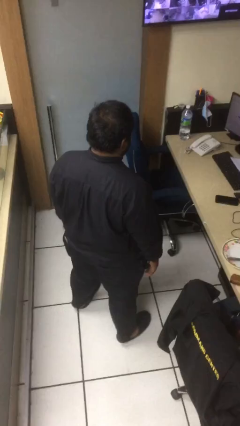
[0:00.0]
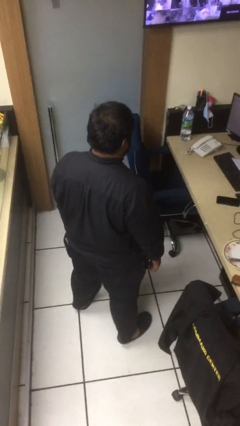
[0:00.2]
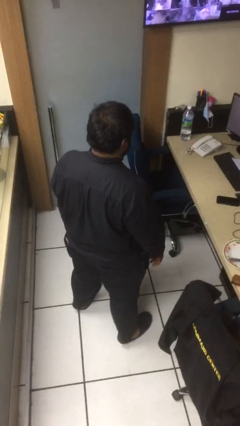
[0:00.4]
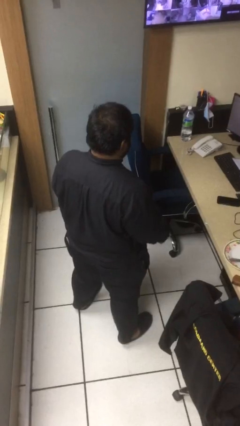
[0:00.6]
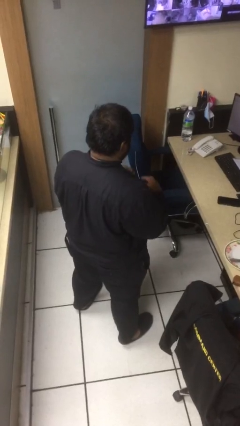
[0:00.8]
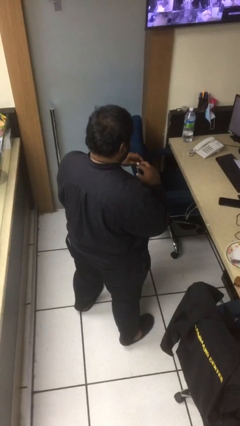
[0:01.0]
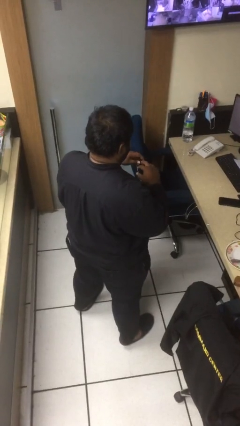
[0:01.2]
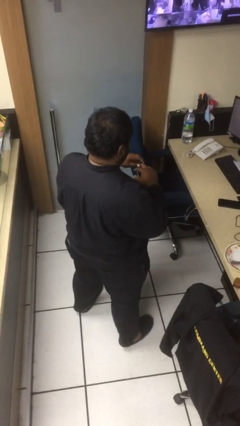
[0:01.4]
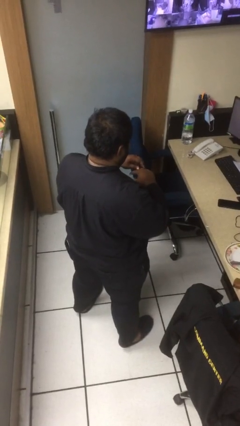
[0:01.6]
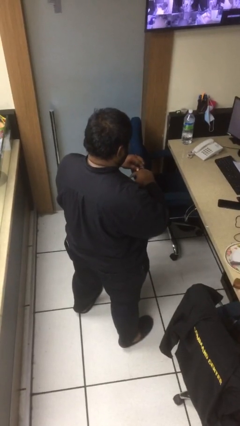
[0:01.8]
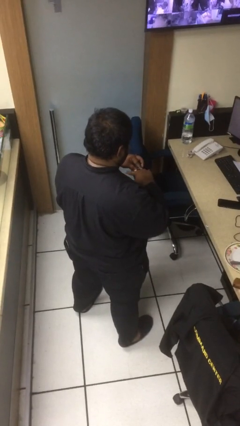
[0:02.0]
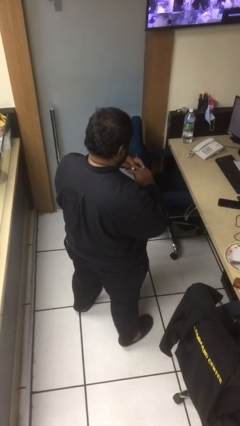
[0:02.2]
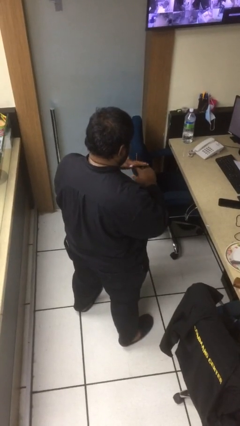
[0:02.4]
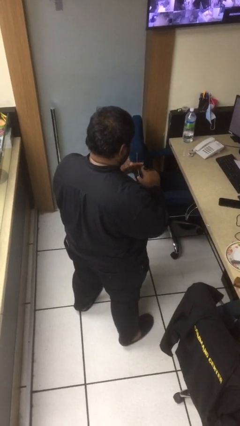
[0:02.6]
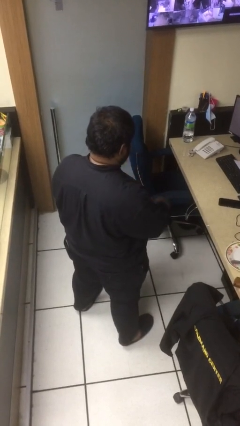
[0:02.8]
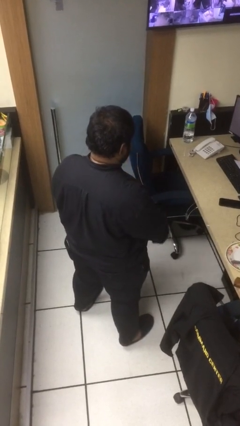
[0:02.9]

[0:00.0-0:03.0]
person puts on ring

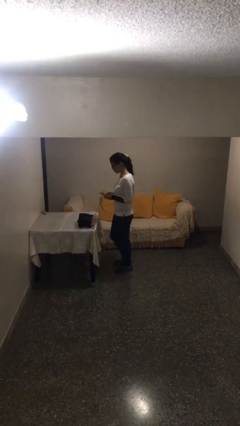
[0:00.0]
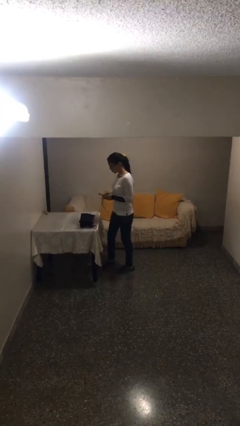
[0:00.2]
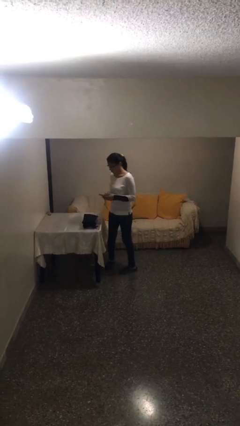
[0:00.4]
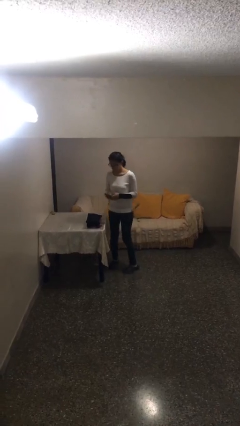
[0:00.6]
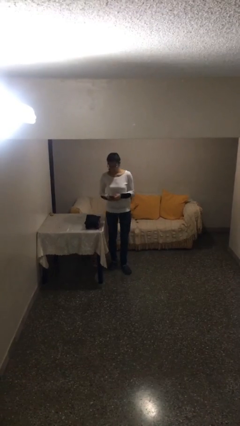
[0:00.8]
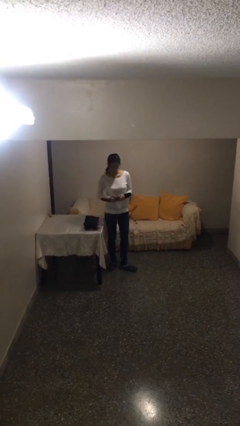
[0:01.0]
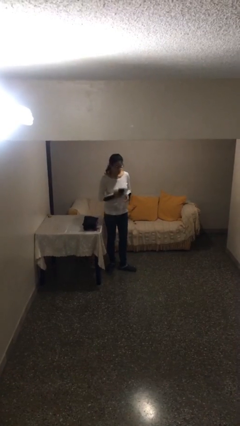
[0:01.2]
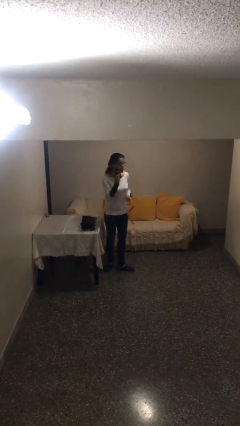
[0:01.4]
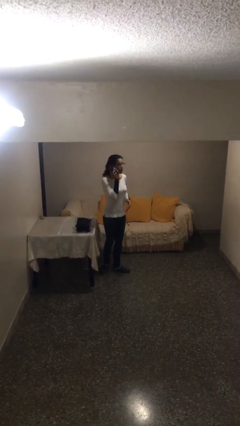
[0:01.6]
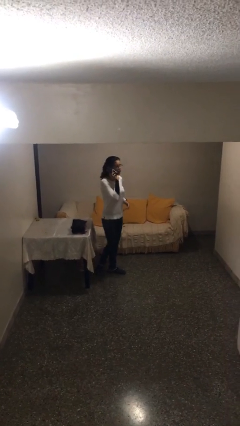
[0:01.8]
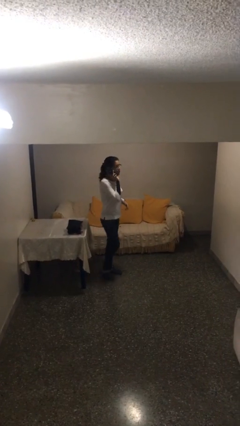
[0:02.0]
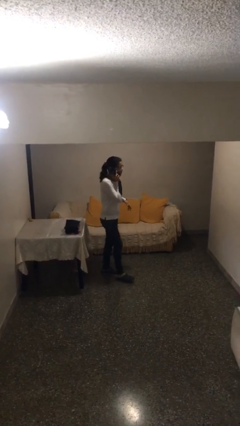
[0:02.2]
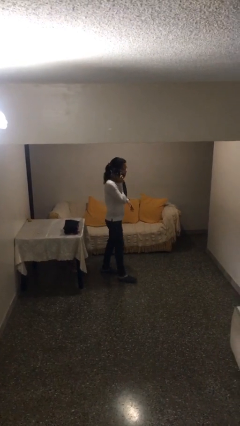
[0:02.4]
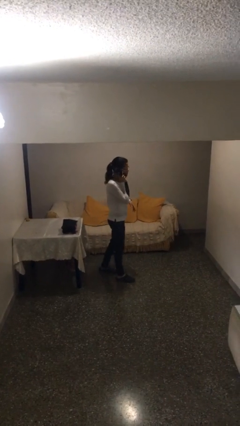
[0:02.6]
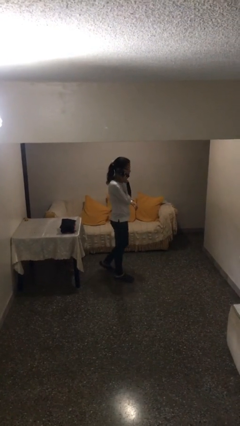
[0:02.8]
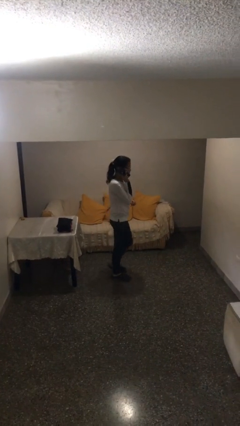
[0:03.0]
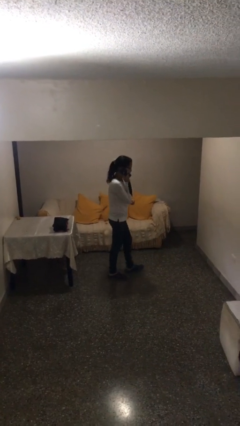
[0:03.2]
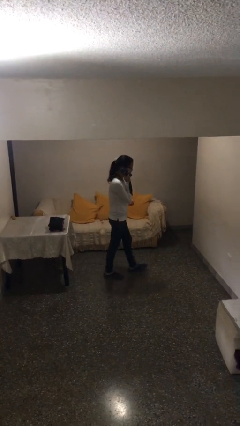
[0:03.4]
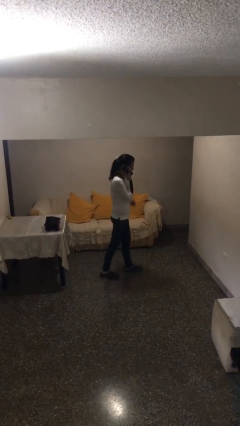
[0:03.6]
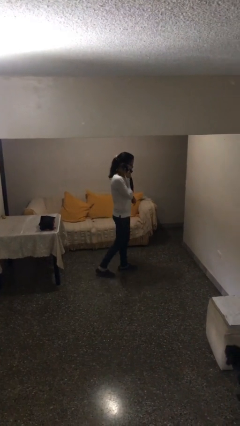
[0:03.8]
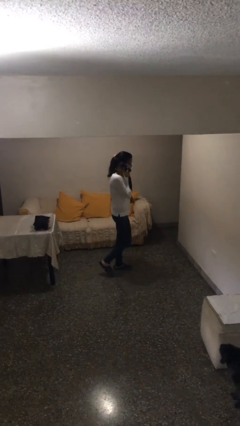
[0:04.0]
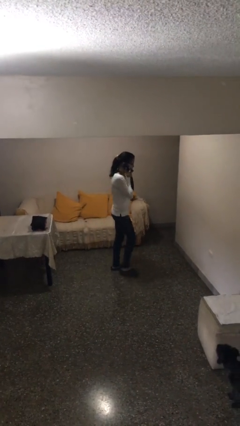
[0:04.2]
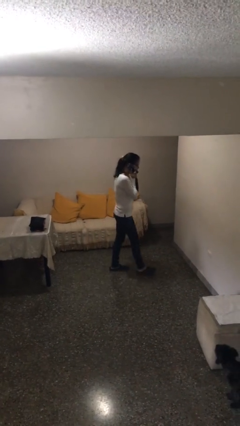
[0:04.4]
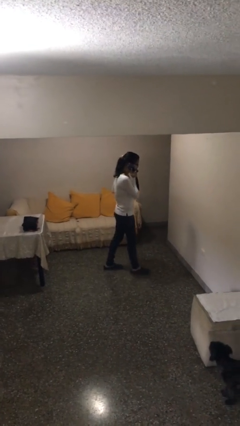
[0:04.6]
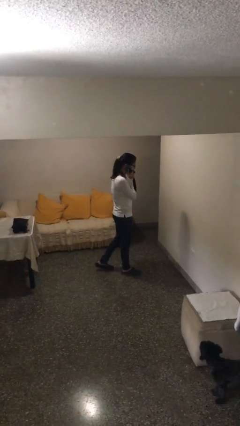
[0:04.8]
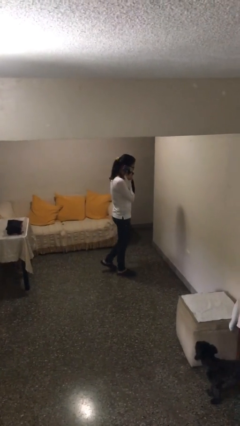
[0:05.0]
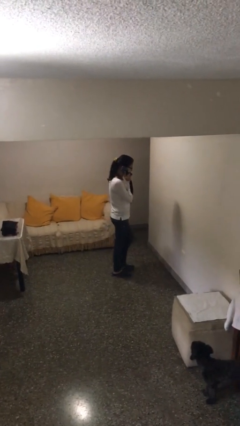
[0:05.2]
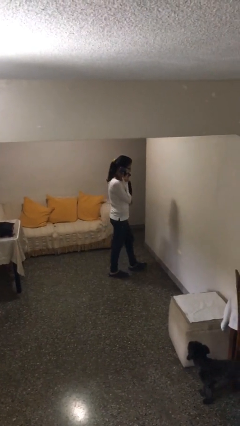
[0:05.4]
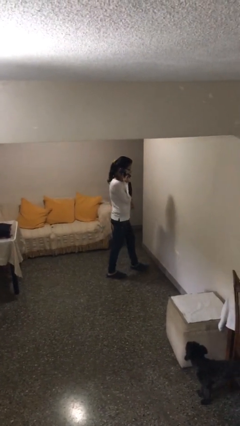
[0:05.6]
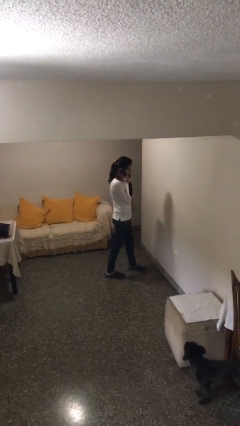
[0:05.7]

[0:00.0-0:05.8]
person talks on phone

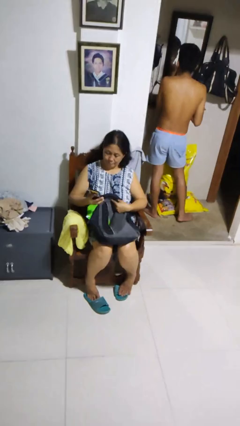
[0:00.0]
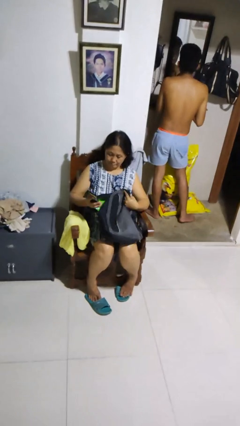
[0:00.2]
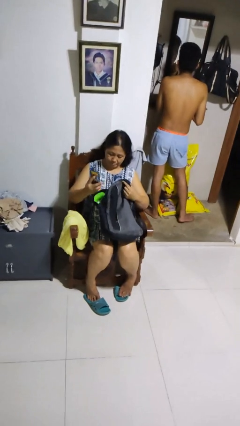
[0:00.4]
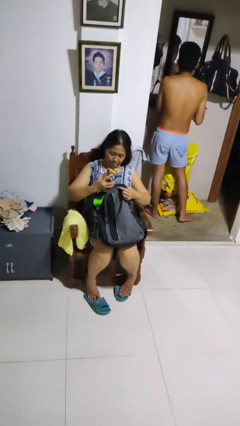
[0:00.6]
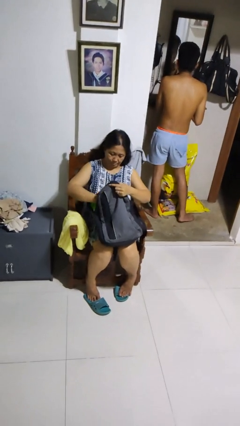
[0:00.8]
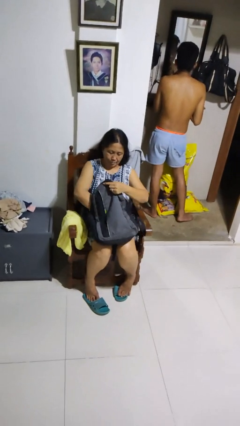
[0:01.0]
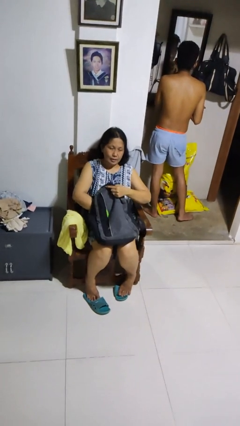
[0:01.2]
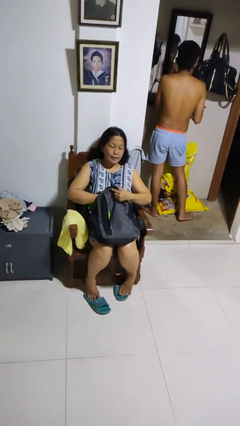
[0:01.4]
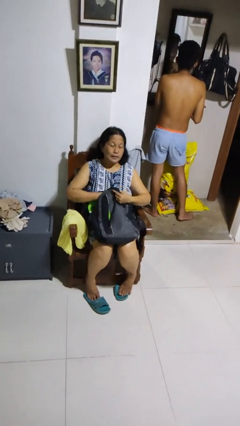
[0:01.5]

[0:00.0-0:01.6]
person puts object into backpack

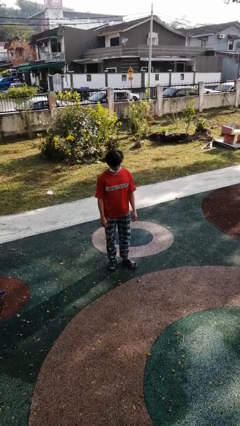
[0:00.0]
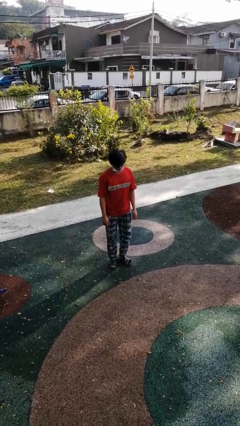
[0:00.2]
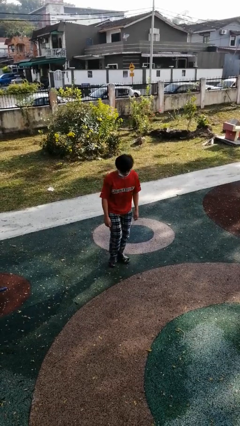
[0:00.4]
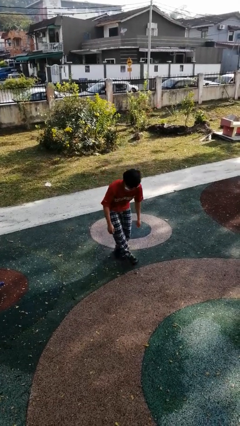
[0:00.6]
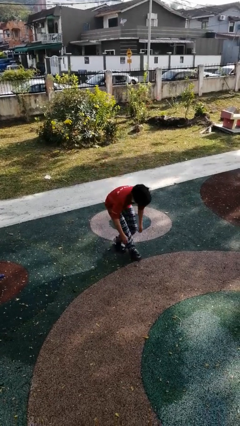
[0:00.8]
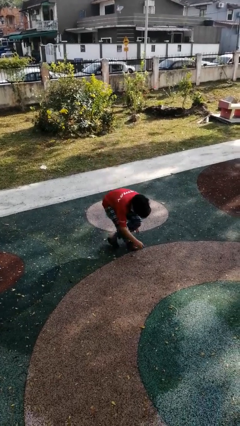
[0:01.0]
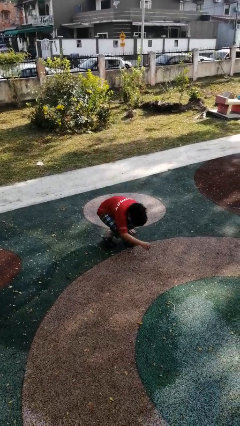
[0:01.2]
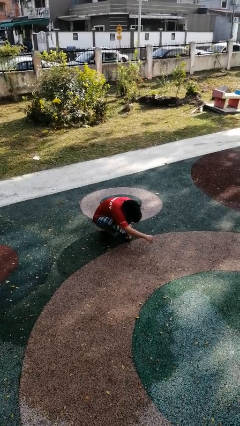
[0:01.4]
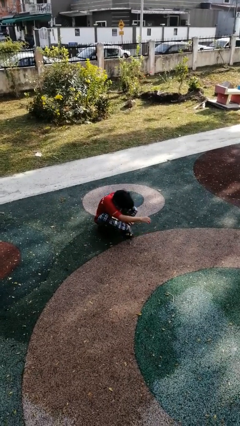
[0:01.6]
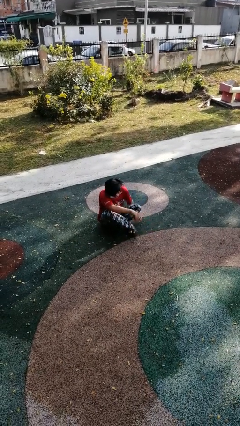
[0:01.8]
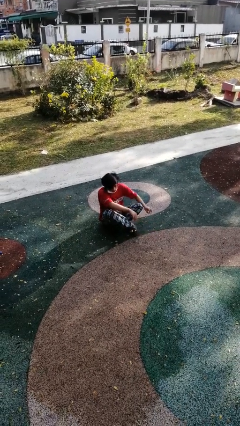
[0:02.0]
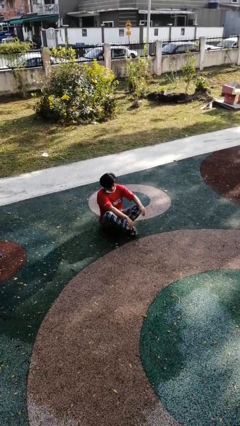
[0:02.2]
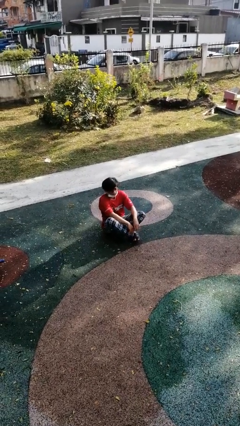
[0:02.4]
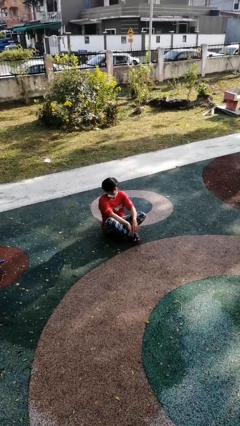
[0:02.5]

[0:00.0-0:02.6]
person sits crisscross

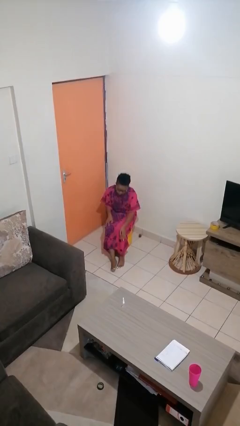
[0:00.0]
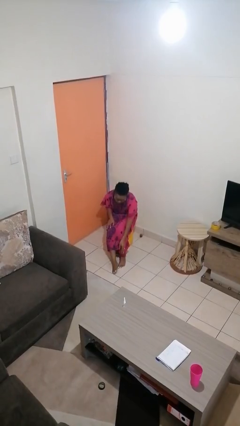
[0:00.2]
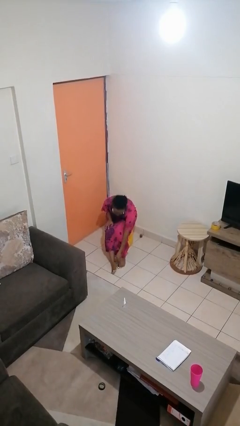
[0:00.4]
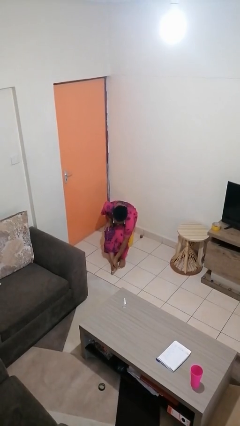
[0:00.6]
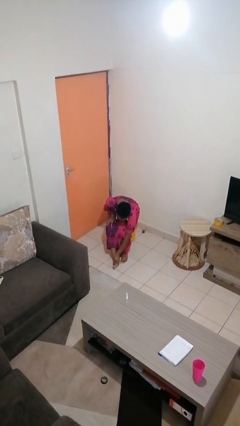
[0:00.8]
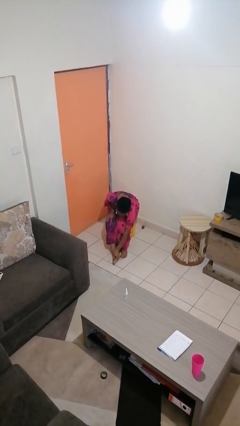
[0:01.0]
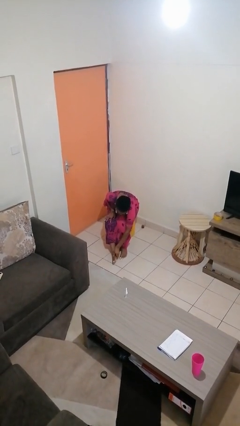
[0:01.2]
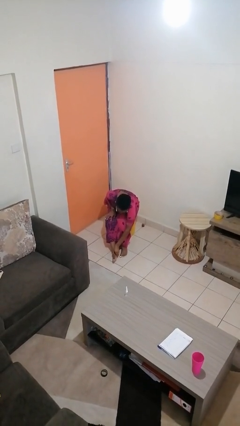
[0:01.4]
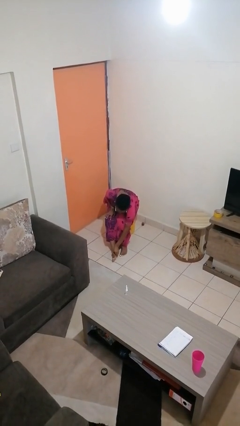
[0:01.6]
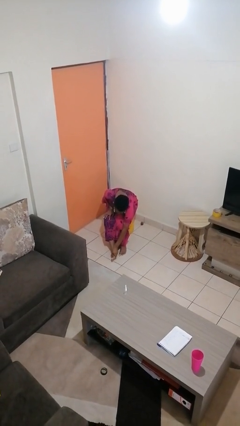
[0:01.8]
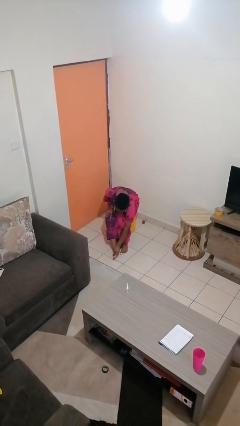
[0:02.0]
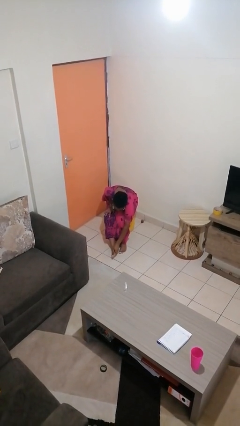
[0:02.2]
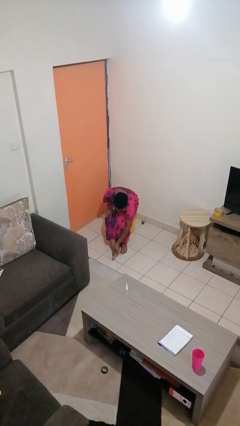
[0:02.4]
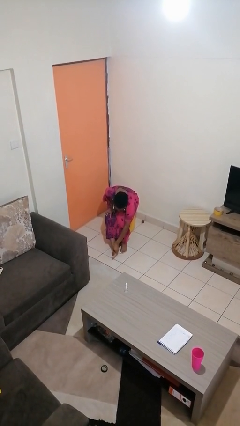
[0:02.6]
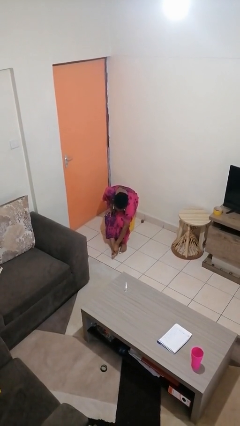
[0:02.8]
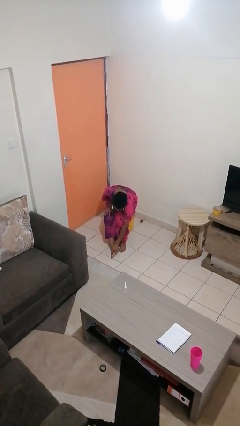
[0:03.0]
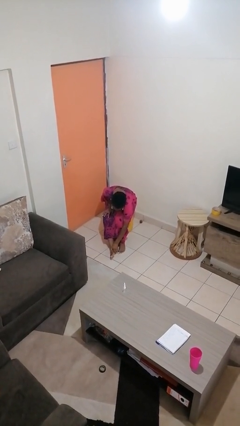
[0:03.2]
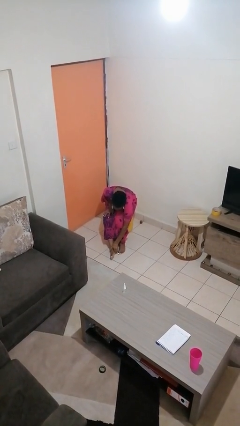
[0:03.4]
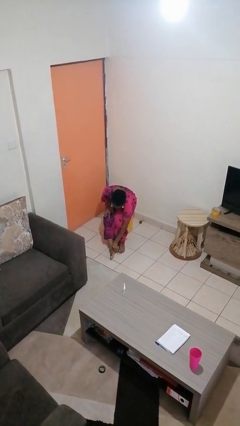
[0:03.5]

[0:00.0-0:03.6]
person rubs foot

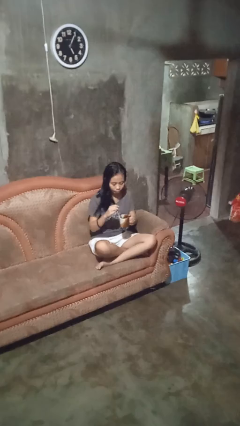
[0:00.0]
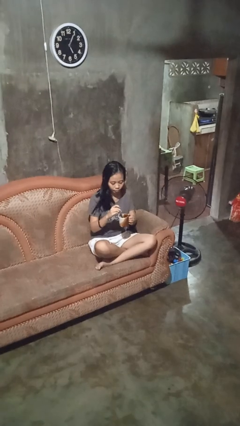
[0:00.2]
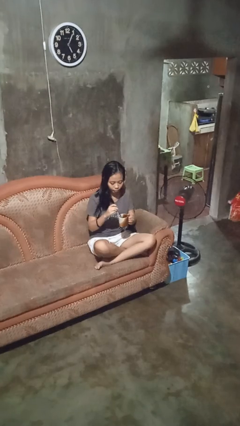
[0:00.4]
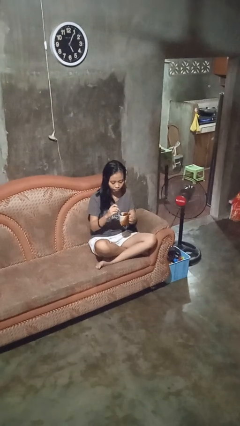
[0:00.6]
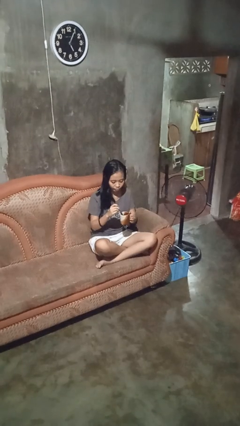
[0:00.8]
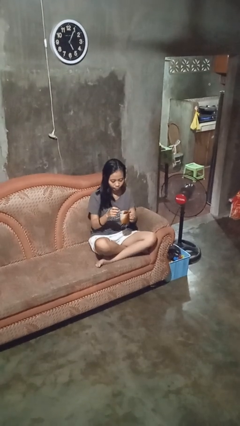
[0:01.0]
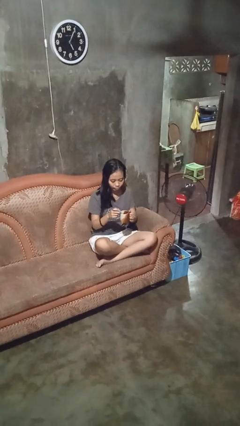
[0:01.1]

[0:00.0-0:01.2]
person stirs mug
